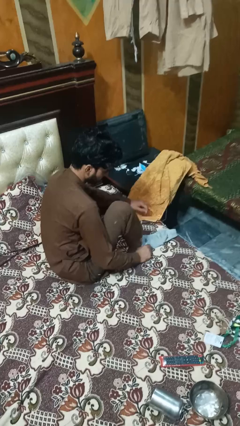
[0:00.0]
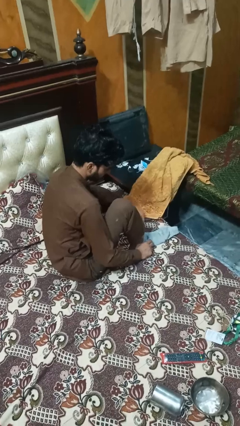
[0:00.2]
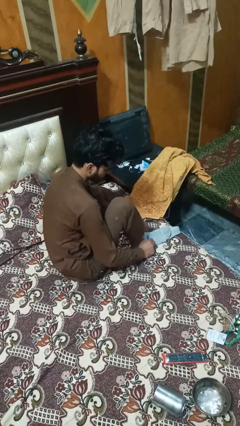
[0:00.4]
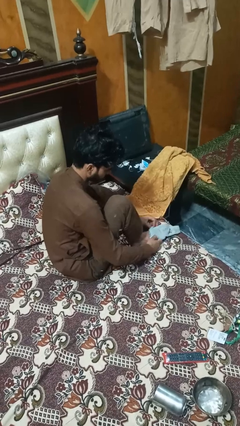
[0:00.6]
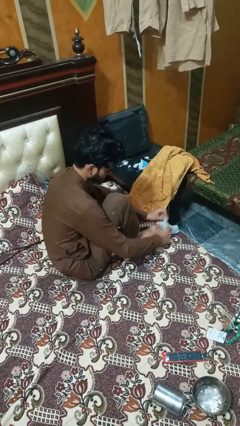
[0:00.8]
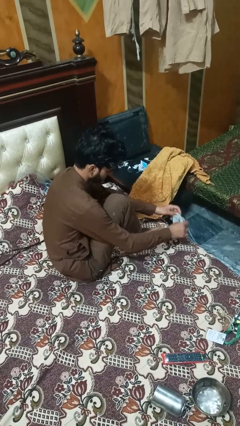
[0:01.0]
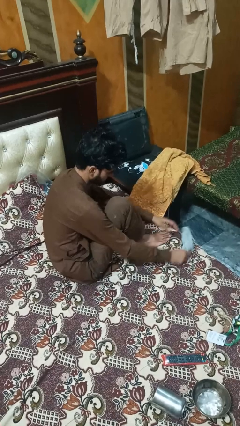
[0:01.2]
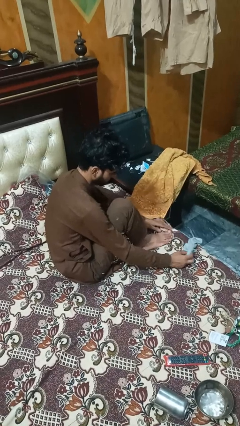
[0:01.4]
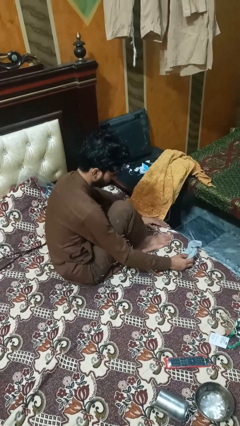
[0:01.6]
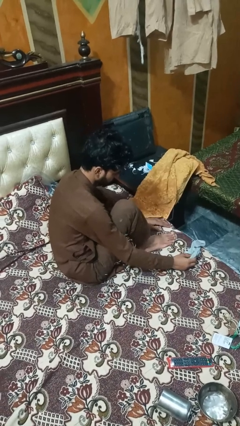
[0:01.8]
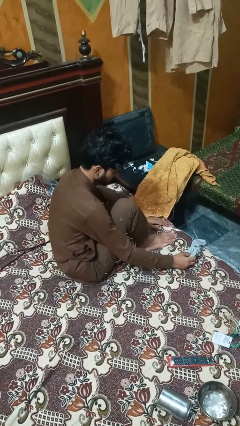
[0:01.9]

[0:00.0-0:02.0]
person takes off socks

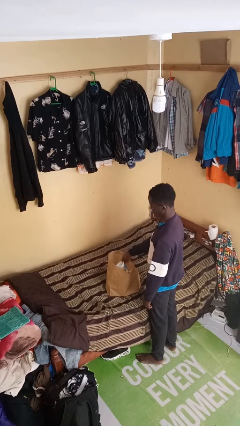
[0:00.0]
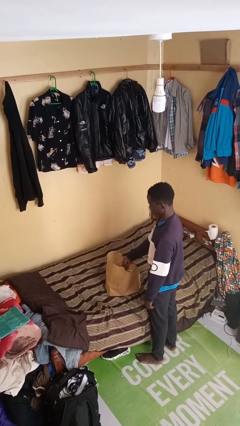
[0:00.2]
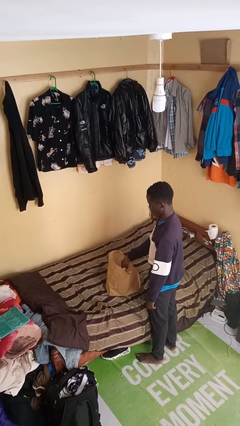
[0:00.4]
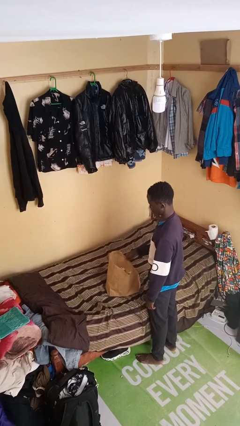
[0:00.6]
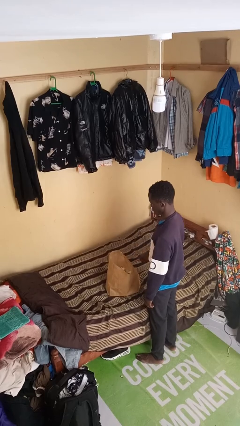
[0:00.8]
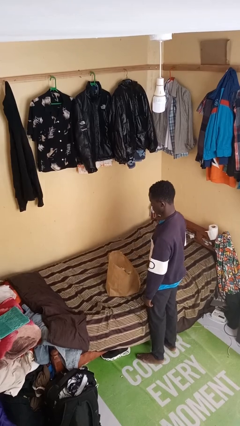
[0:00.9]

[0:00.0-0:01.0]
person puts object into bag

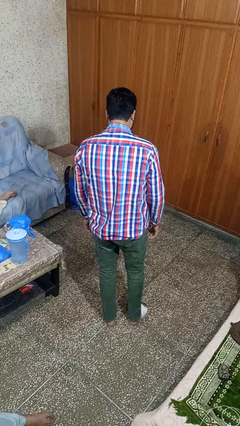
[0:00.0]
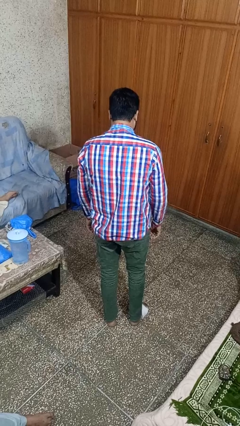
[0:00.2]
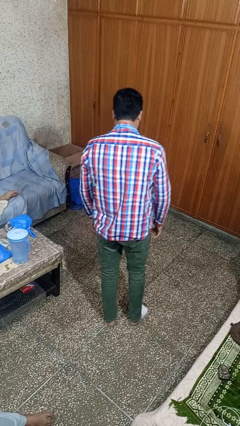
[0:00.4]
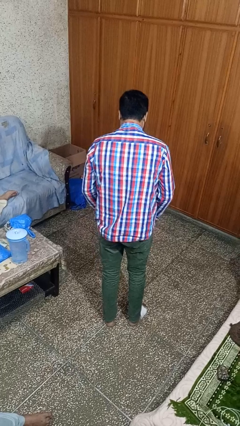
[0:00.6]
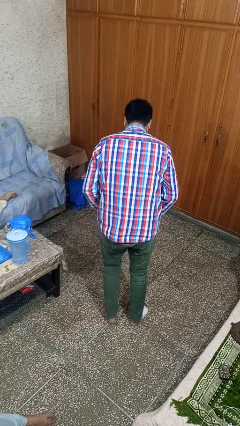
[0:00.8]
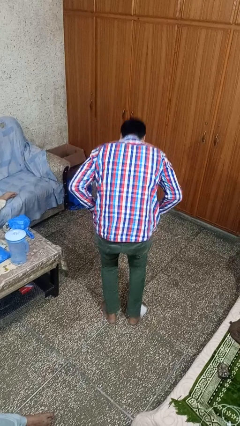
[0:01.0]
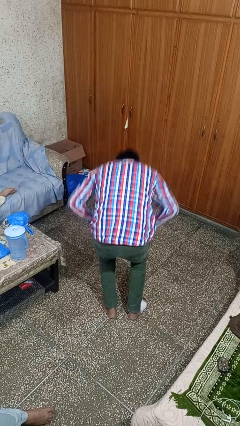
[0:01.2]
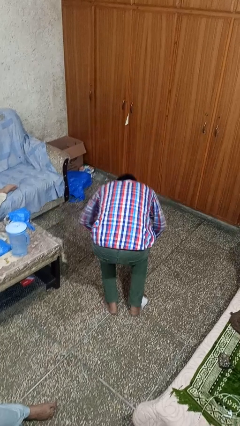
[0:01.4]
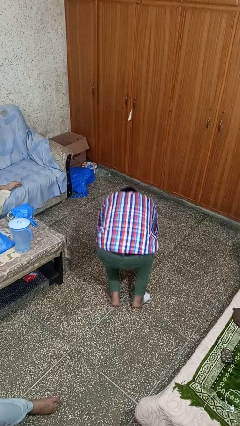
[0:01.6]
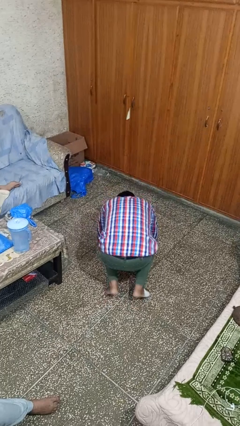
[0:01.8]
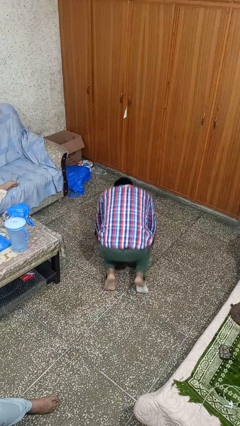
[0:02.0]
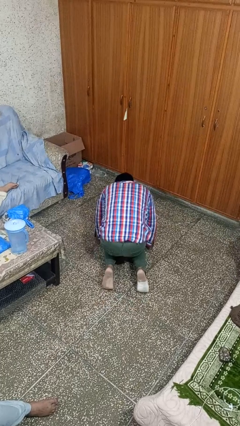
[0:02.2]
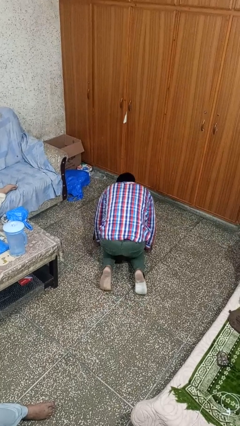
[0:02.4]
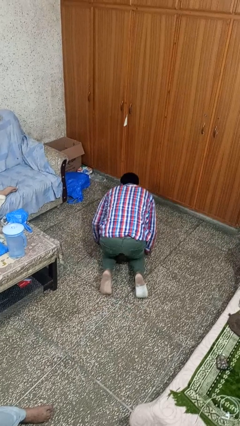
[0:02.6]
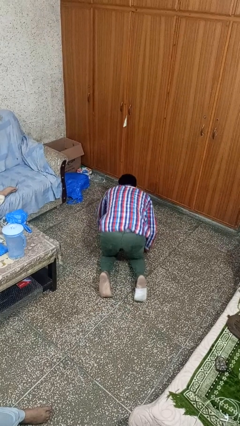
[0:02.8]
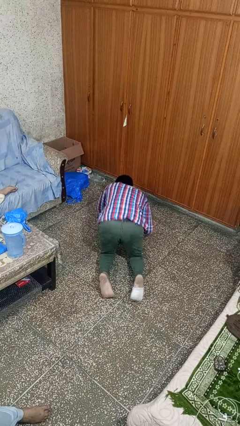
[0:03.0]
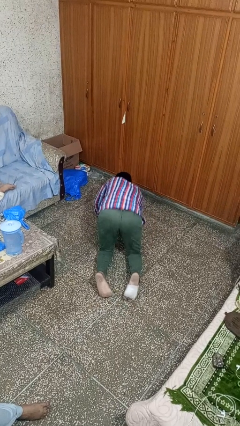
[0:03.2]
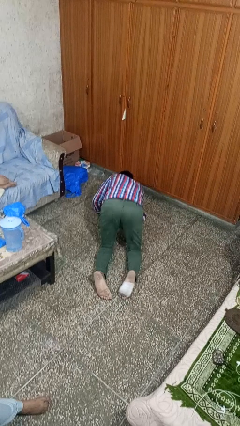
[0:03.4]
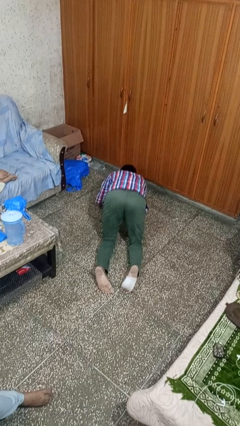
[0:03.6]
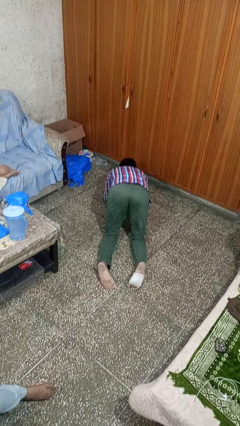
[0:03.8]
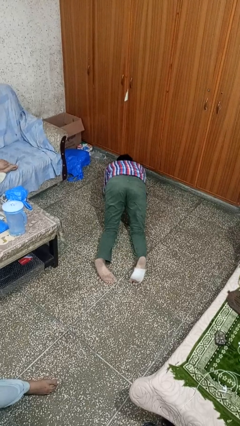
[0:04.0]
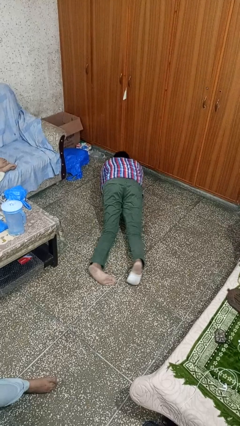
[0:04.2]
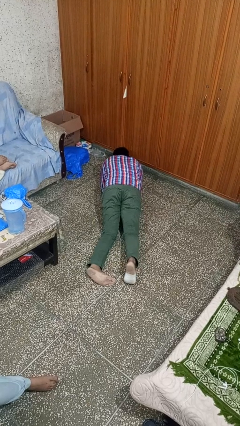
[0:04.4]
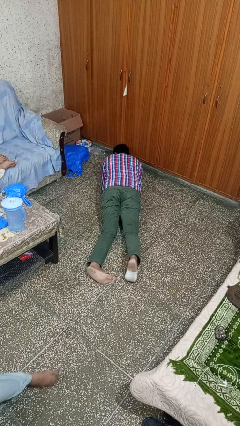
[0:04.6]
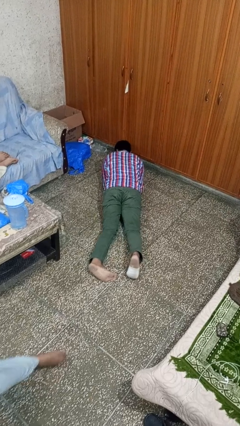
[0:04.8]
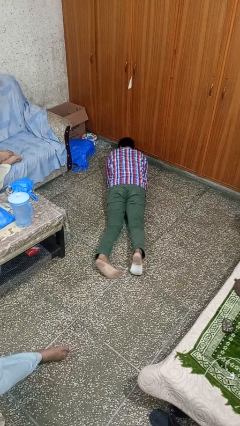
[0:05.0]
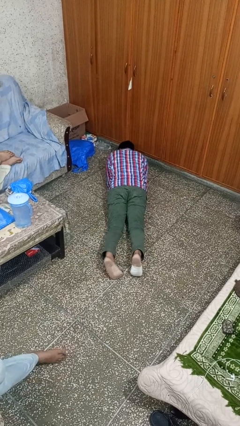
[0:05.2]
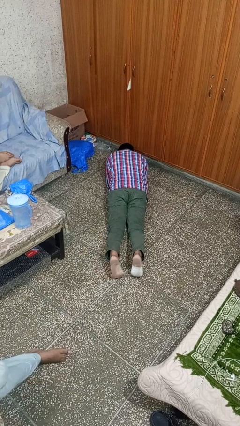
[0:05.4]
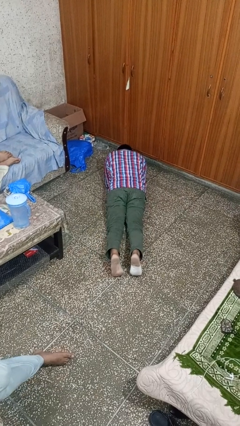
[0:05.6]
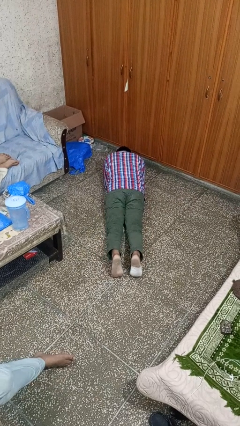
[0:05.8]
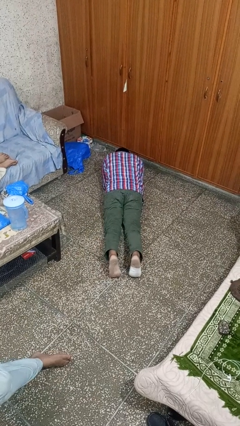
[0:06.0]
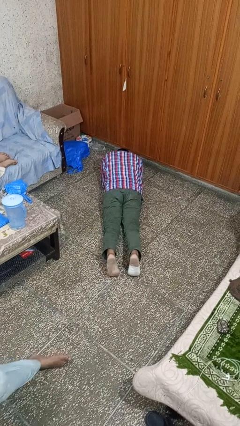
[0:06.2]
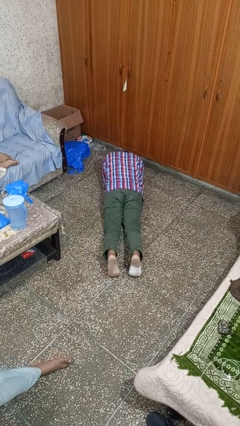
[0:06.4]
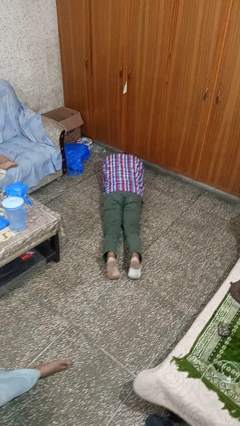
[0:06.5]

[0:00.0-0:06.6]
person exercises with plank

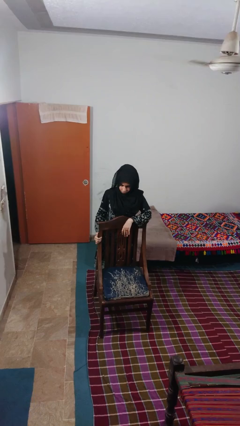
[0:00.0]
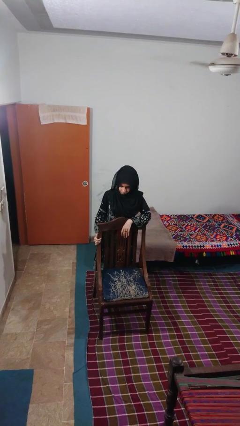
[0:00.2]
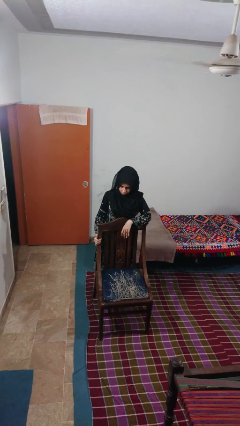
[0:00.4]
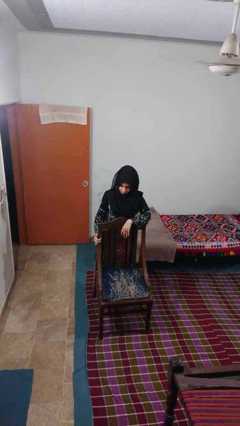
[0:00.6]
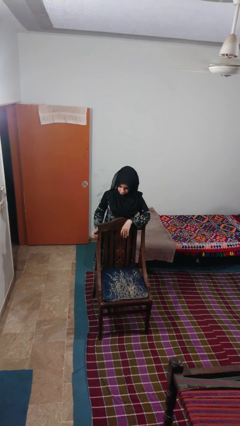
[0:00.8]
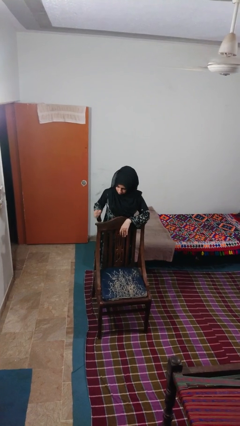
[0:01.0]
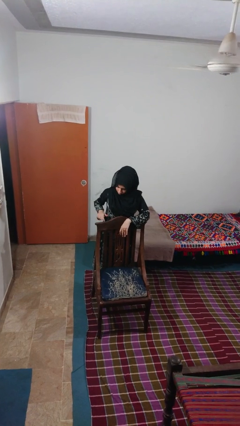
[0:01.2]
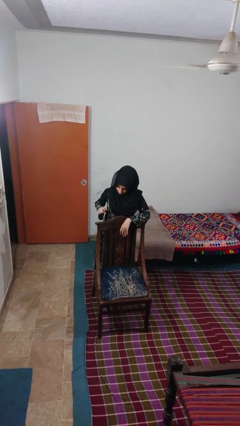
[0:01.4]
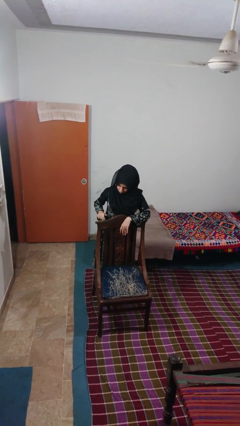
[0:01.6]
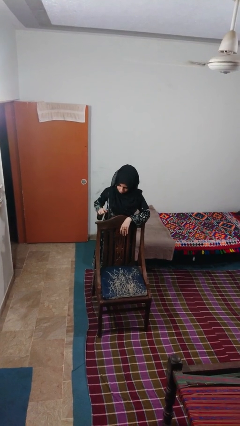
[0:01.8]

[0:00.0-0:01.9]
person taps object with finger

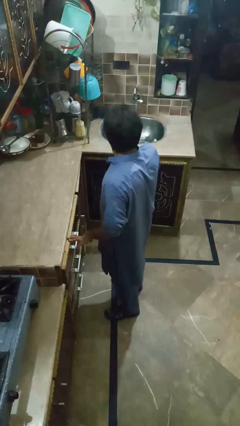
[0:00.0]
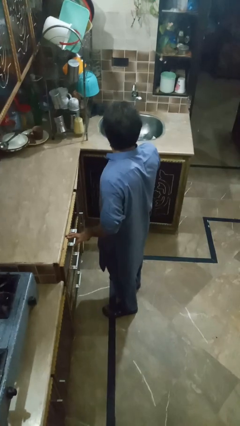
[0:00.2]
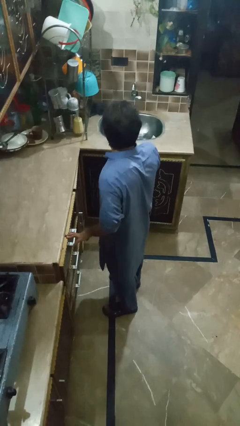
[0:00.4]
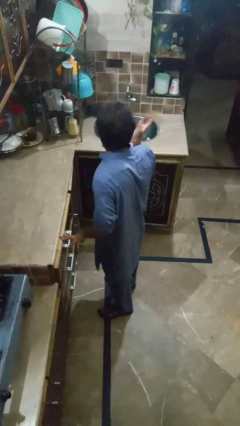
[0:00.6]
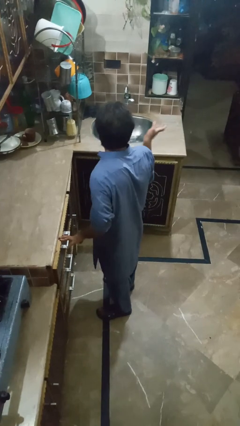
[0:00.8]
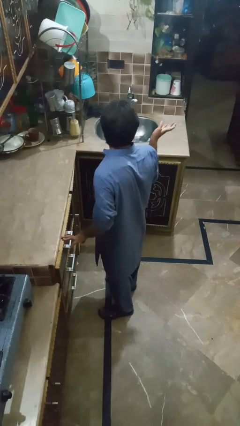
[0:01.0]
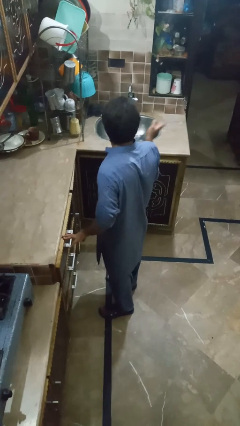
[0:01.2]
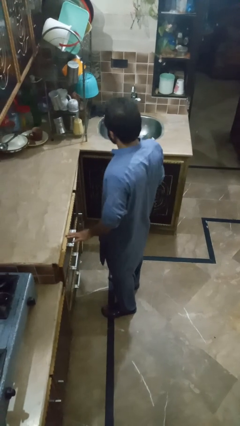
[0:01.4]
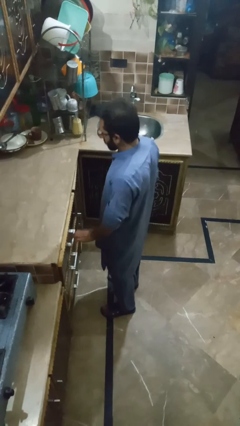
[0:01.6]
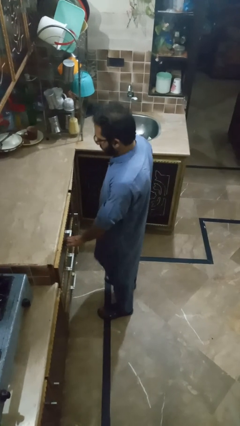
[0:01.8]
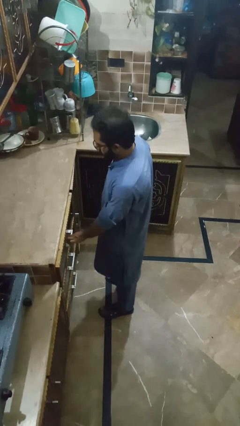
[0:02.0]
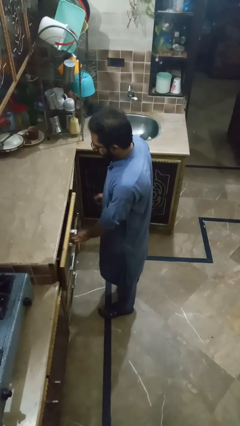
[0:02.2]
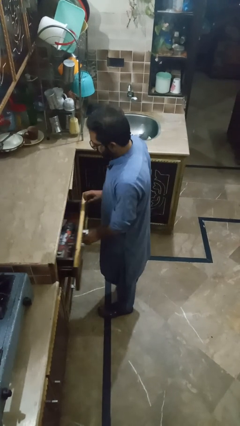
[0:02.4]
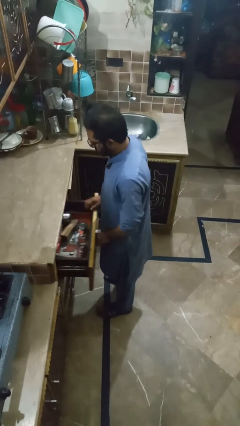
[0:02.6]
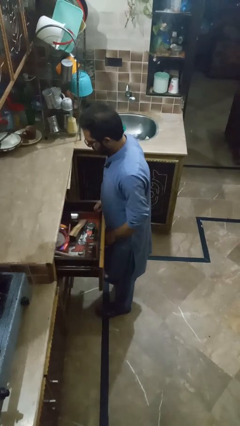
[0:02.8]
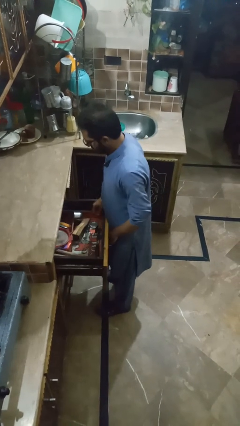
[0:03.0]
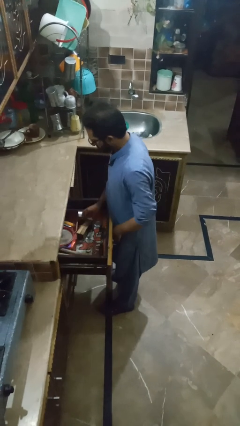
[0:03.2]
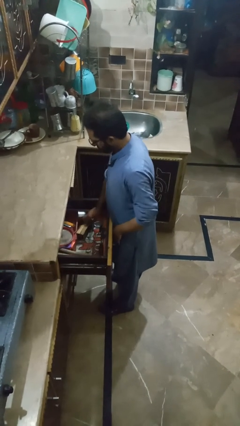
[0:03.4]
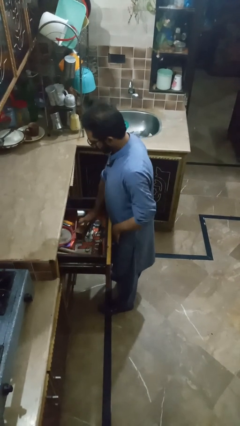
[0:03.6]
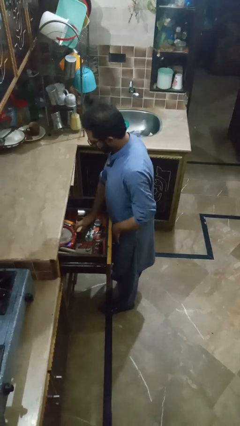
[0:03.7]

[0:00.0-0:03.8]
person searches in kitchen drawer

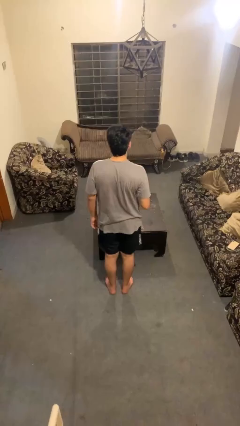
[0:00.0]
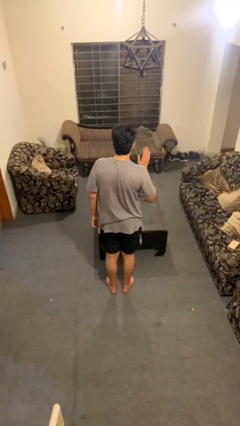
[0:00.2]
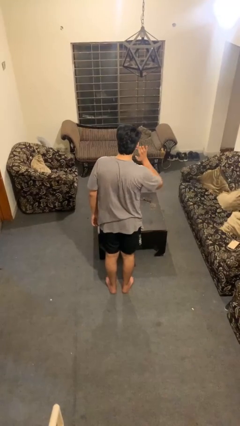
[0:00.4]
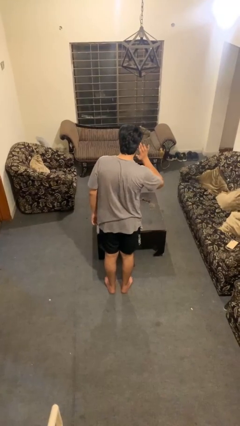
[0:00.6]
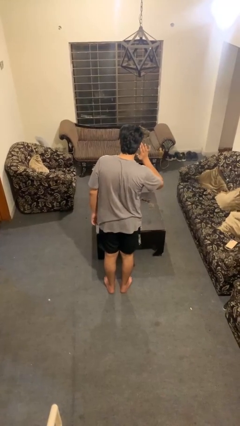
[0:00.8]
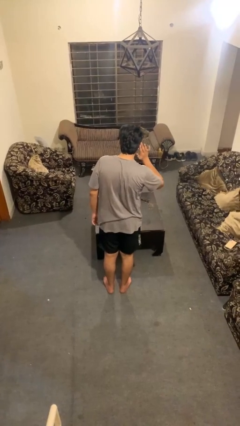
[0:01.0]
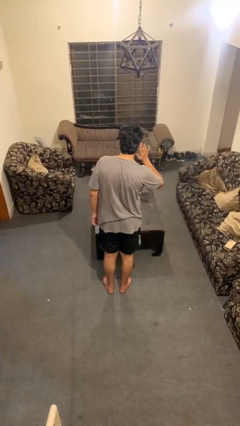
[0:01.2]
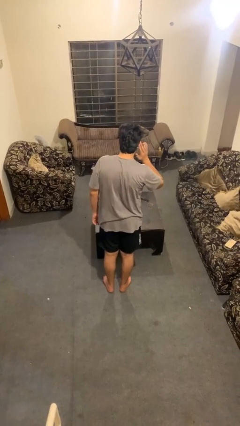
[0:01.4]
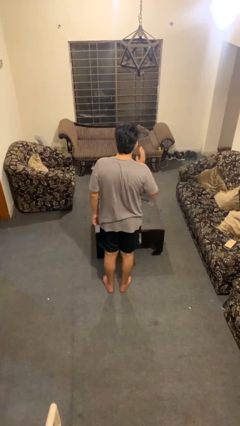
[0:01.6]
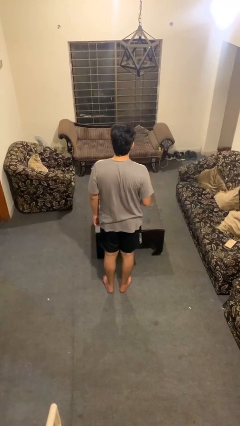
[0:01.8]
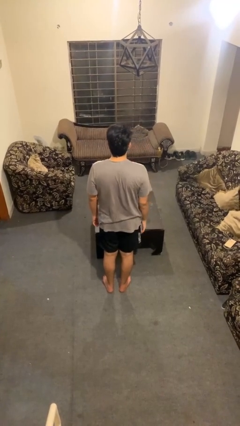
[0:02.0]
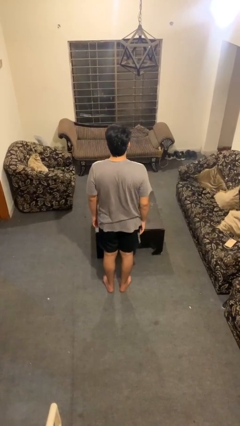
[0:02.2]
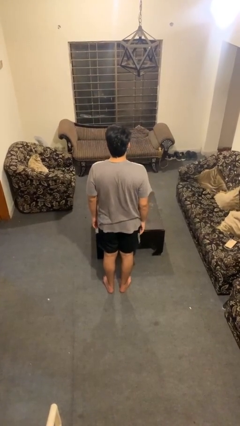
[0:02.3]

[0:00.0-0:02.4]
person gestures listen closely
